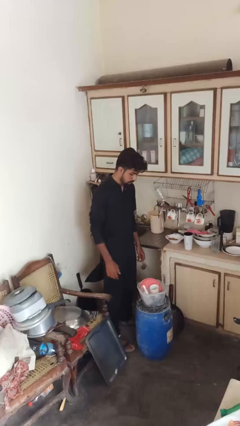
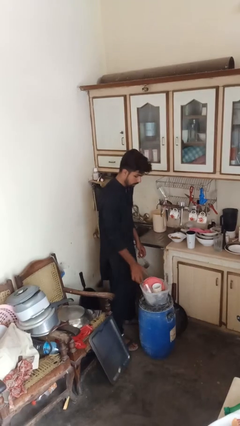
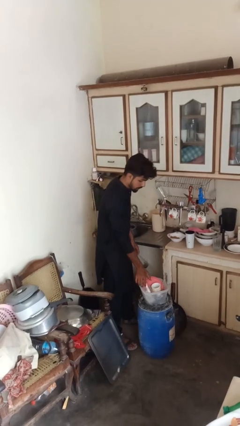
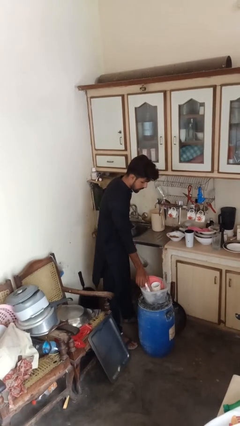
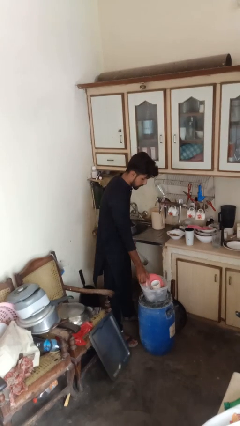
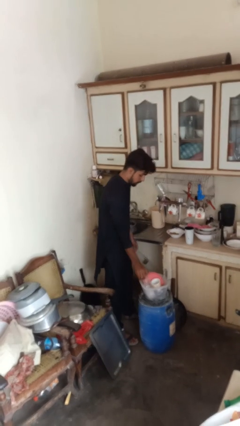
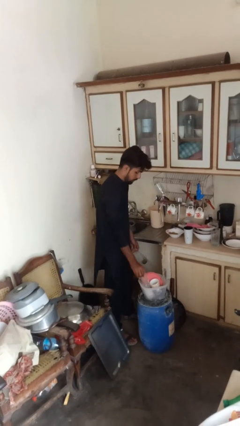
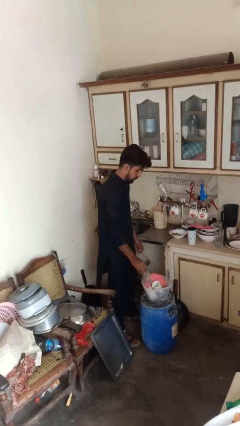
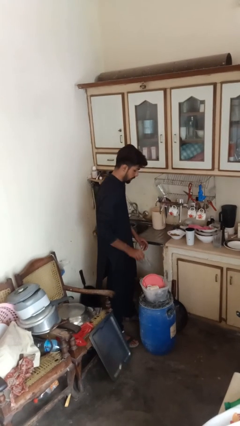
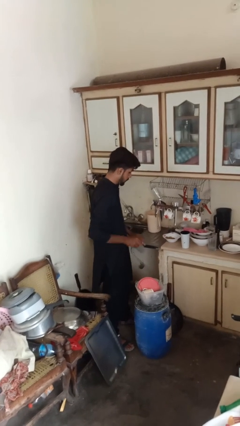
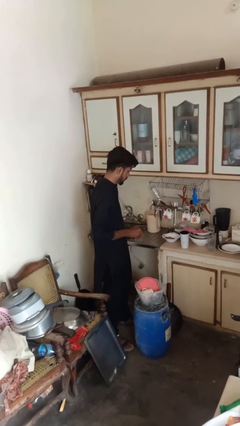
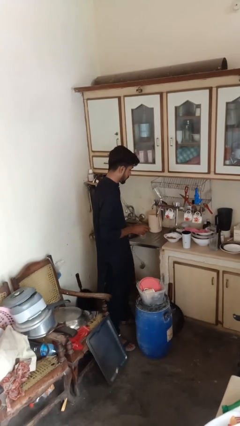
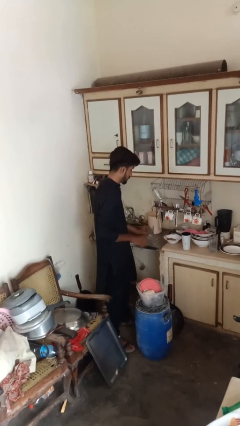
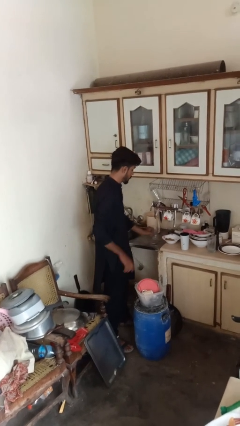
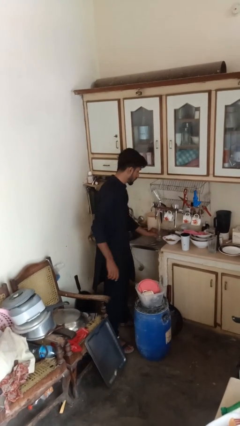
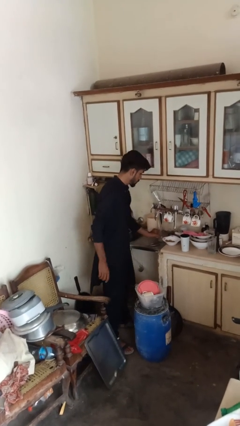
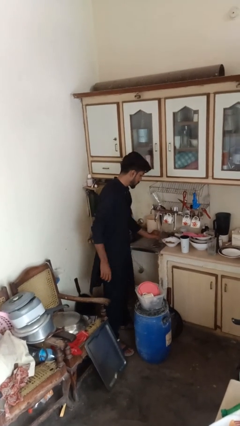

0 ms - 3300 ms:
person unloads dishwasher

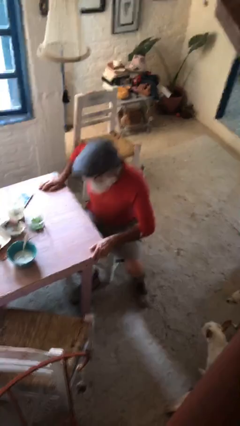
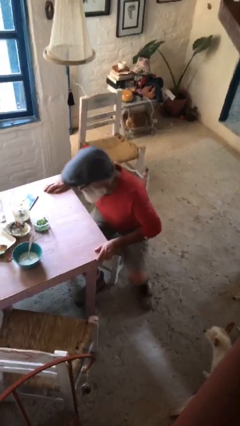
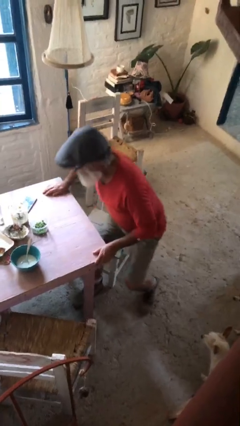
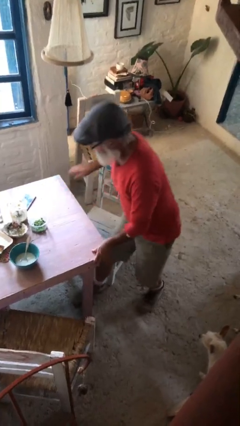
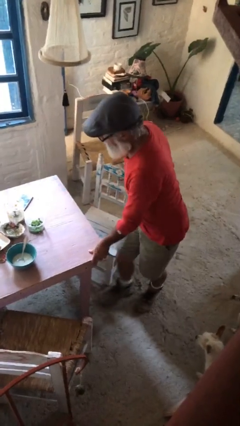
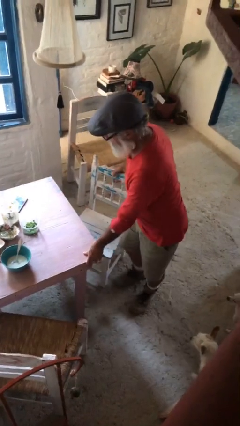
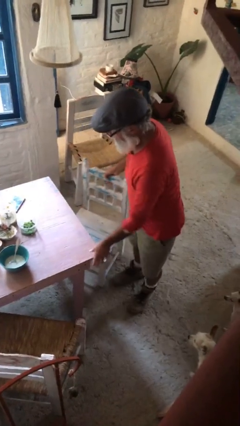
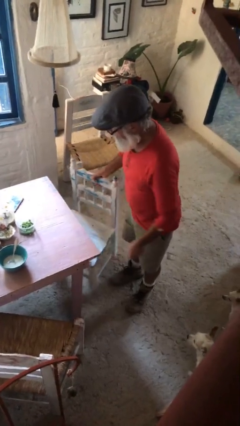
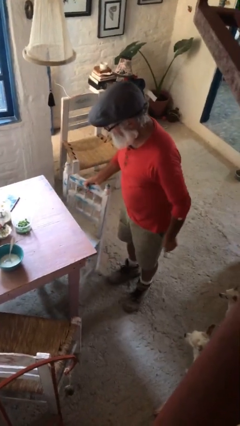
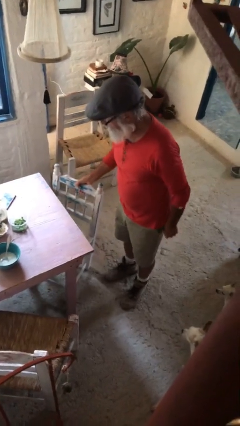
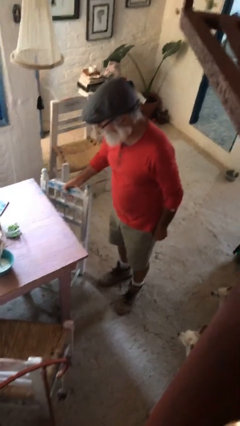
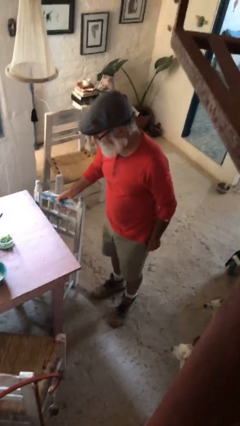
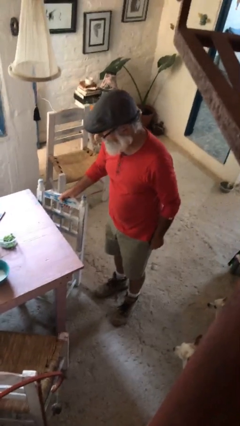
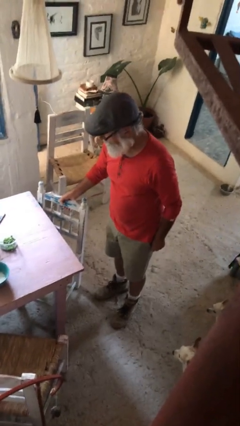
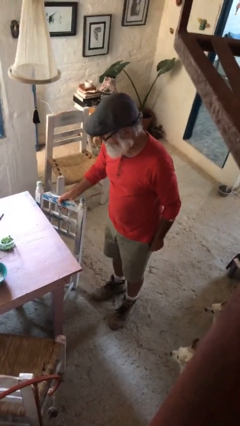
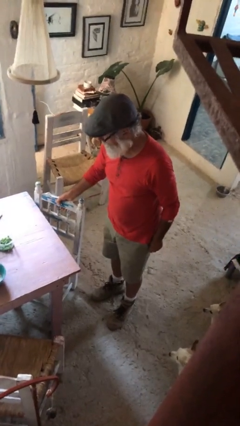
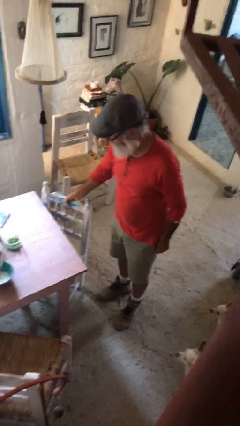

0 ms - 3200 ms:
person stands up

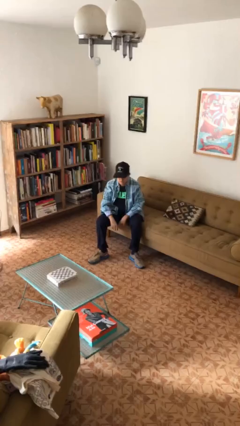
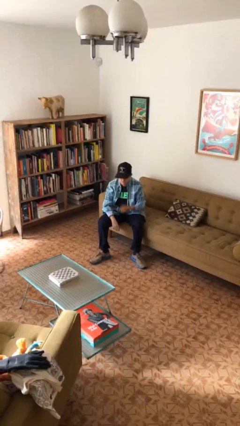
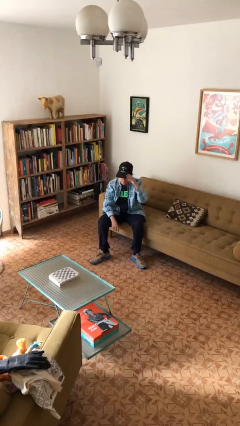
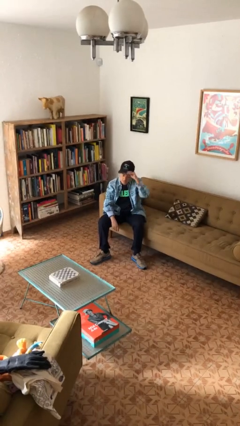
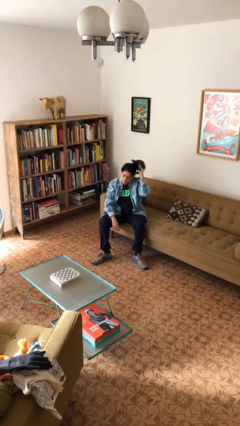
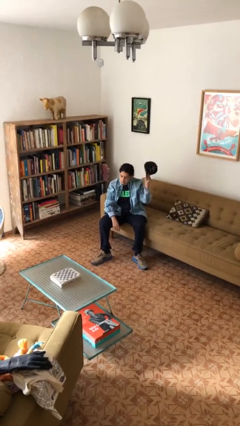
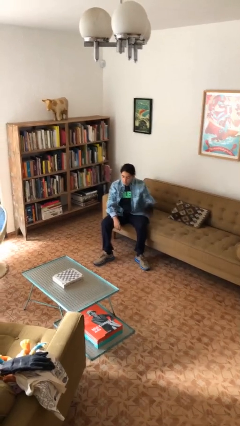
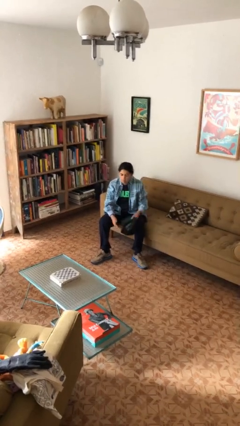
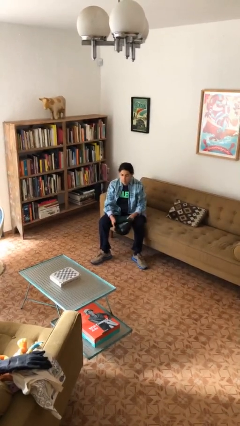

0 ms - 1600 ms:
person takes off hat

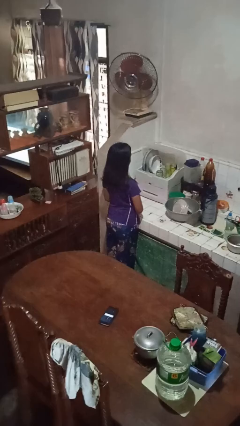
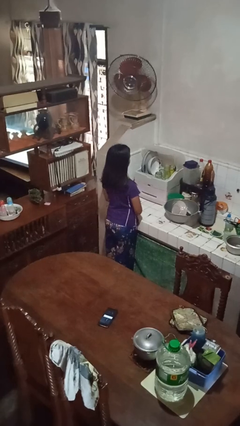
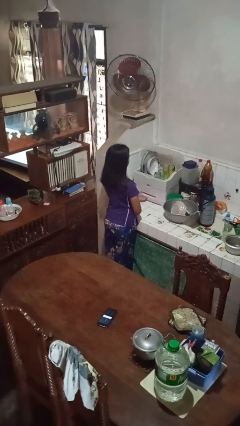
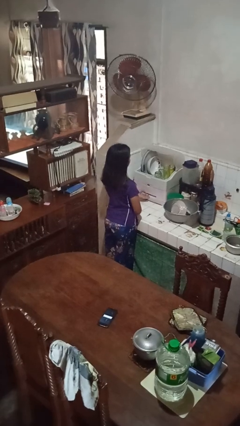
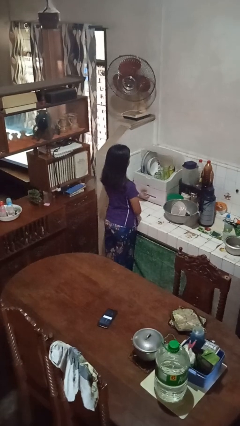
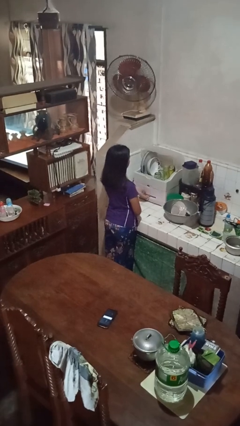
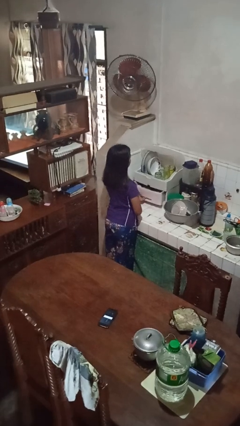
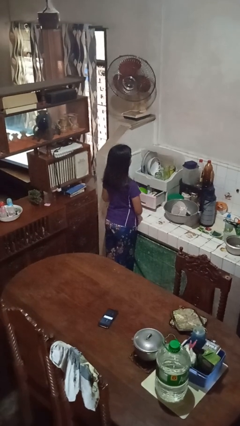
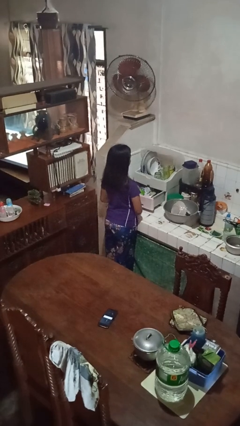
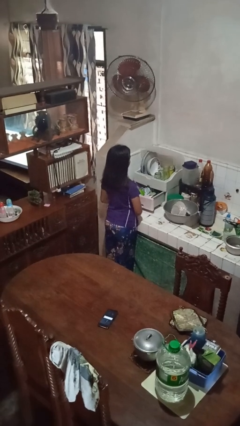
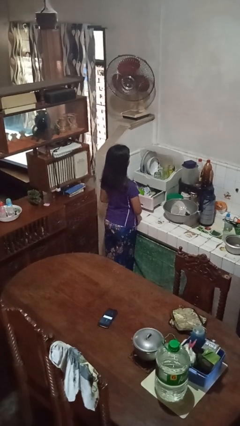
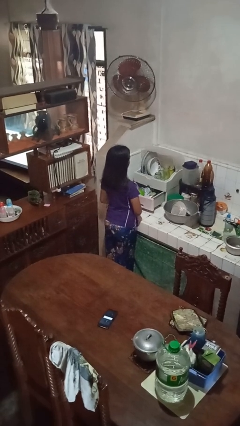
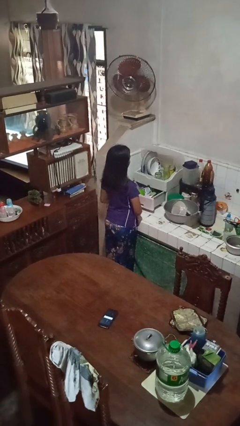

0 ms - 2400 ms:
person opens kitchen drawer

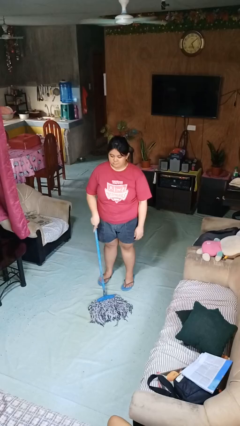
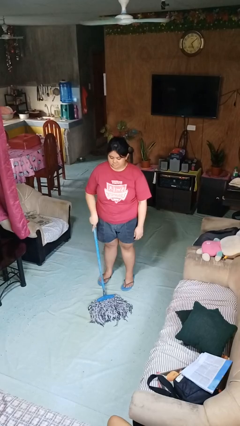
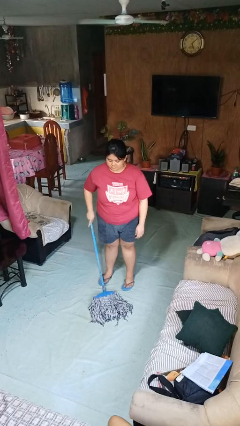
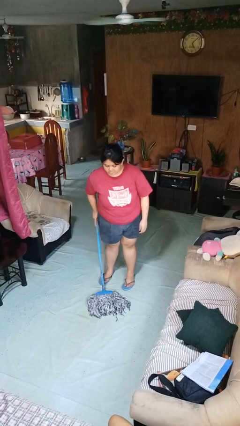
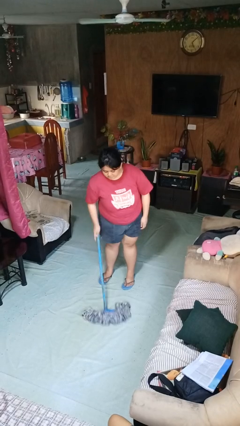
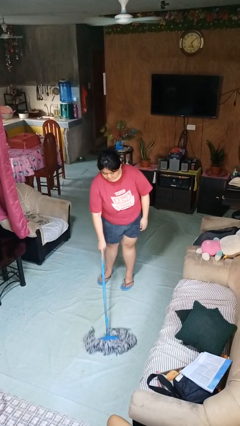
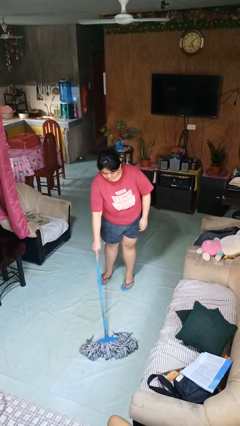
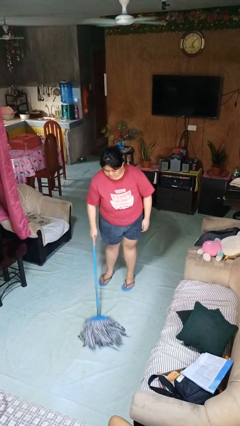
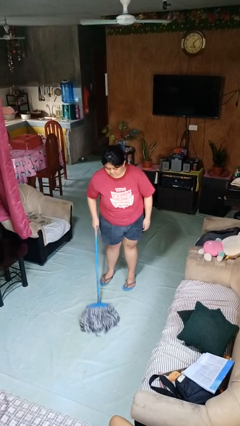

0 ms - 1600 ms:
person mops

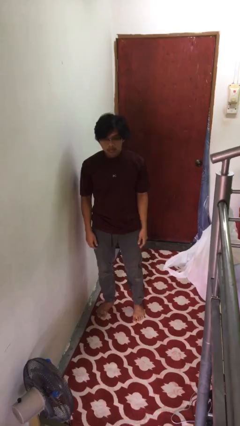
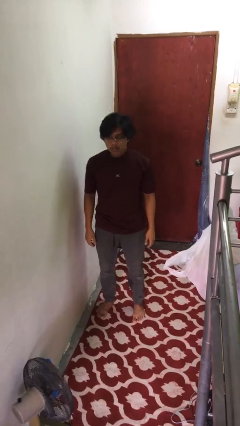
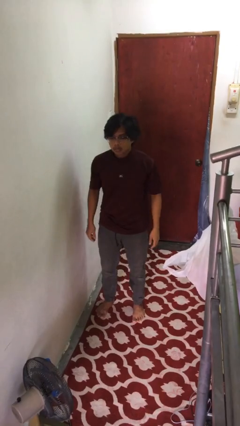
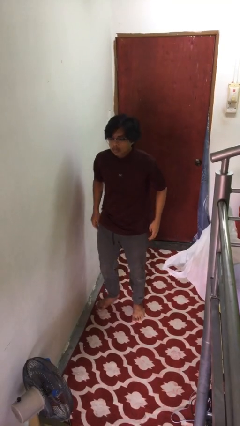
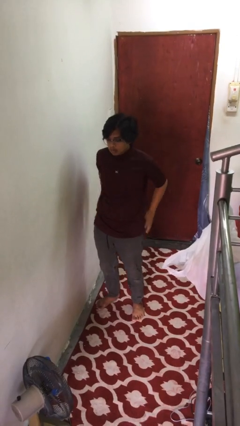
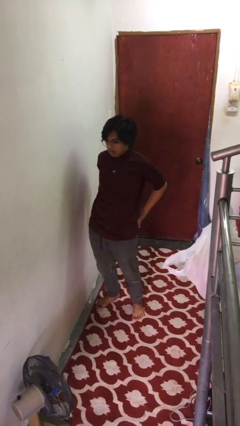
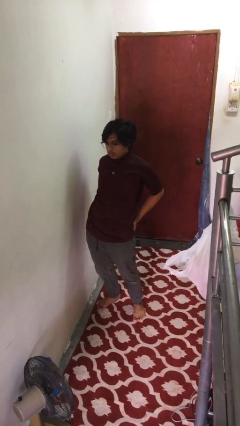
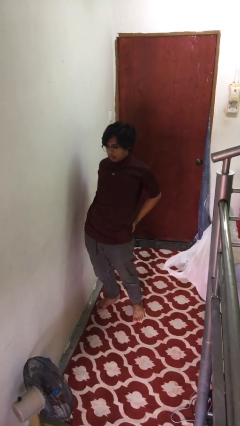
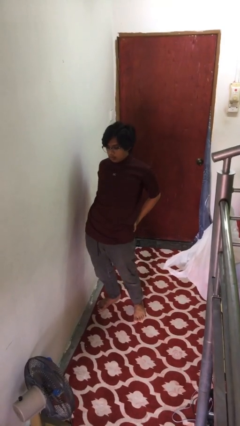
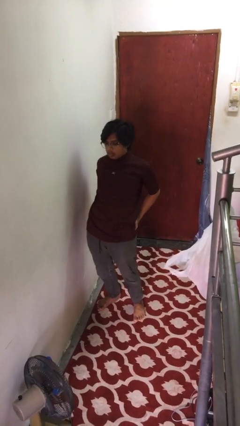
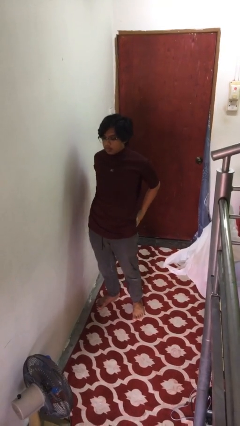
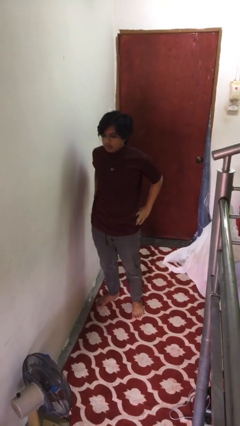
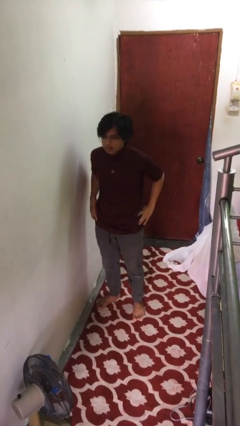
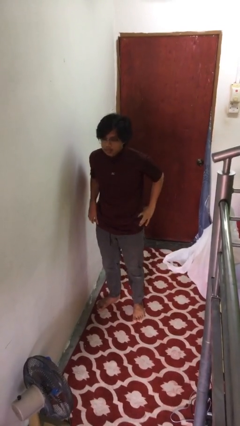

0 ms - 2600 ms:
person stretches back

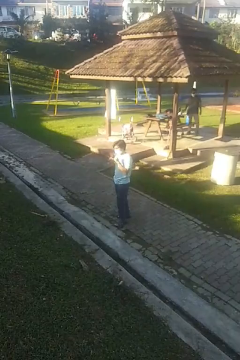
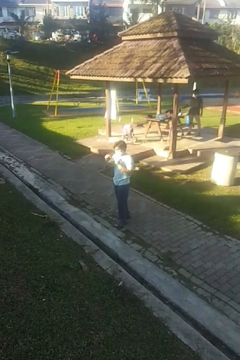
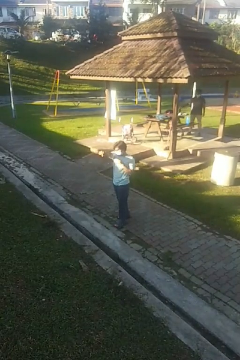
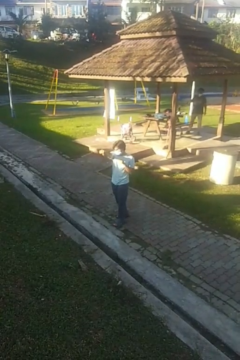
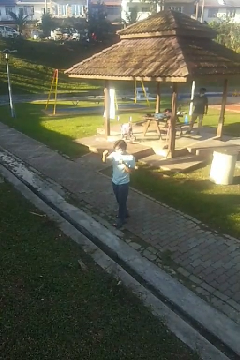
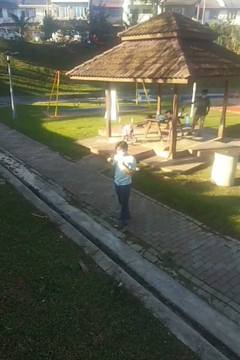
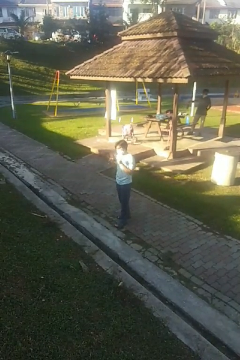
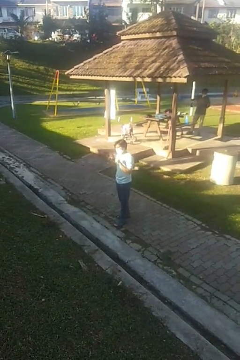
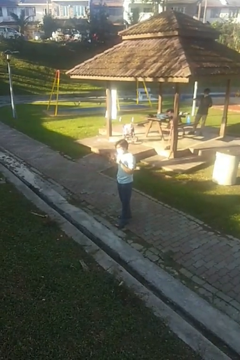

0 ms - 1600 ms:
person punches

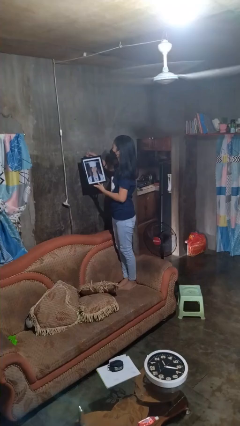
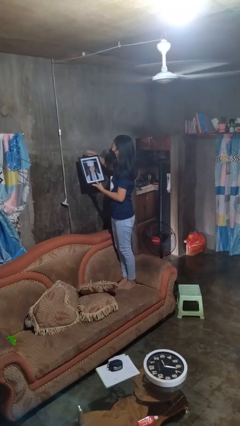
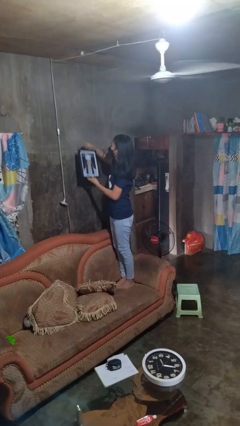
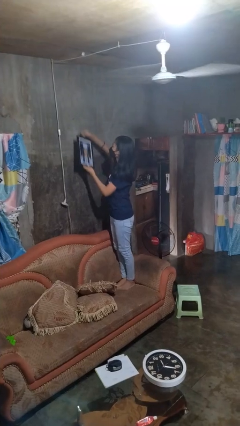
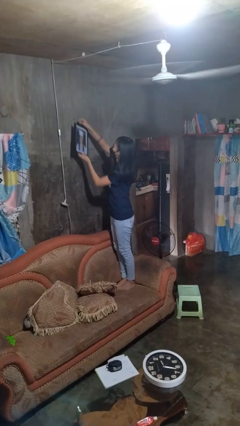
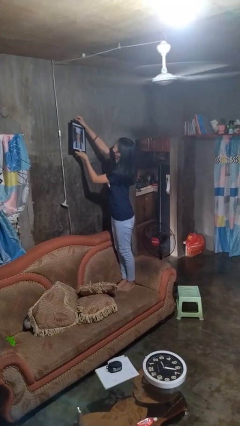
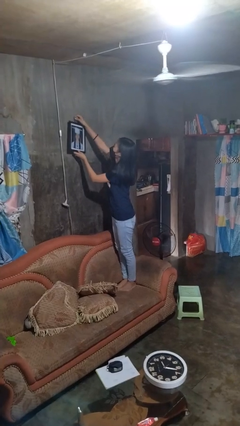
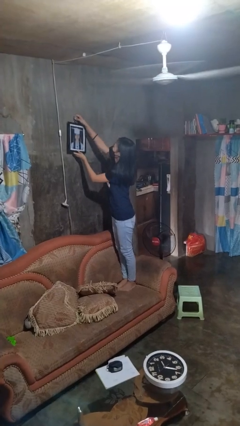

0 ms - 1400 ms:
person puts up picture frame
